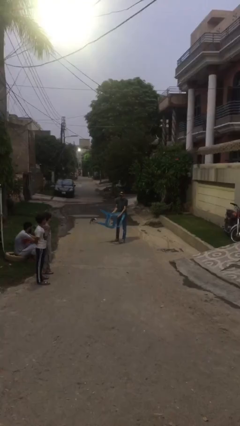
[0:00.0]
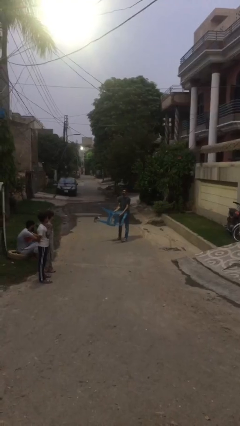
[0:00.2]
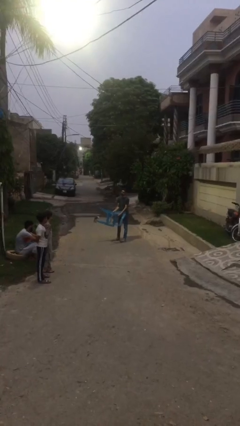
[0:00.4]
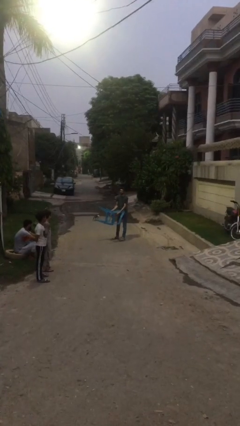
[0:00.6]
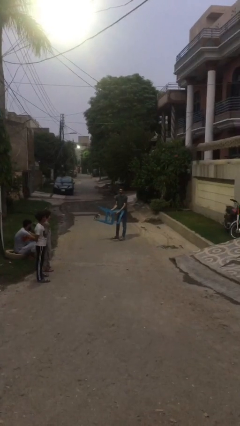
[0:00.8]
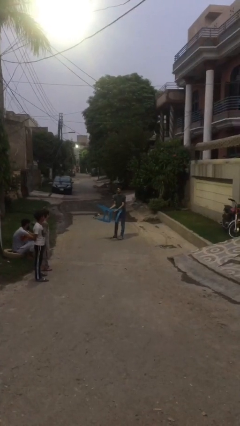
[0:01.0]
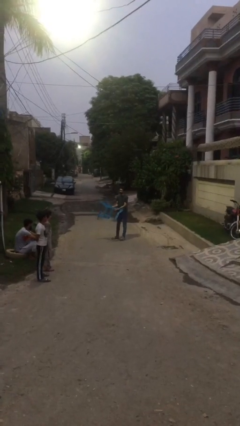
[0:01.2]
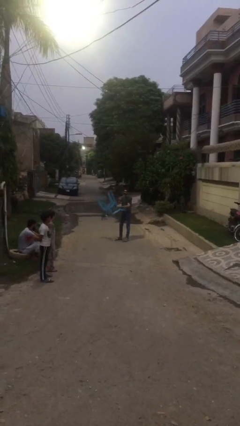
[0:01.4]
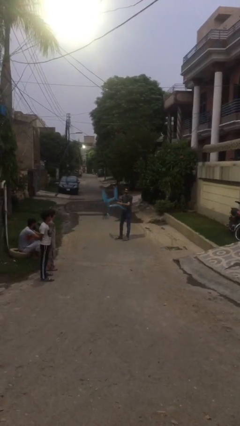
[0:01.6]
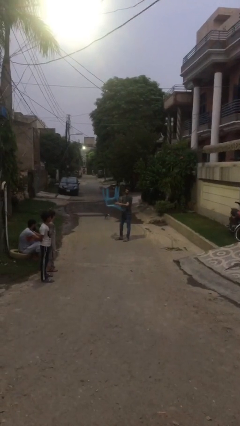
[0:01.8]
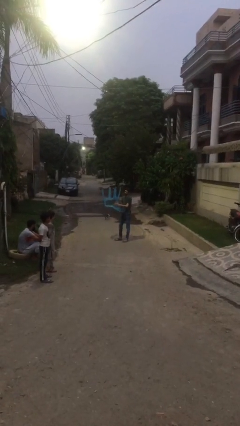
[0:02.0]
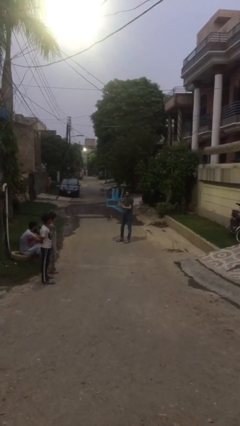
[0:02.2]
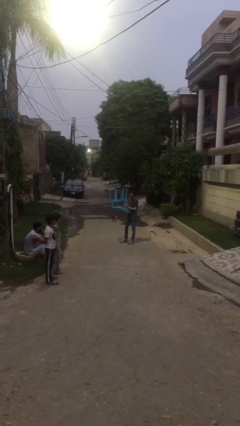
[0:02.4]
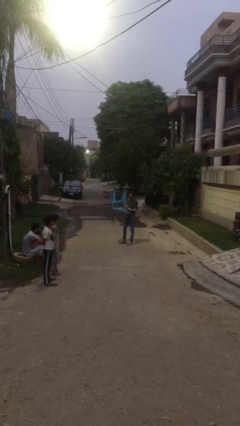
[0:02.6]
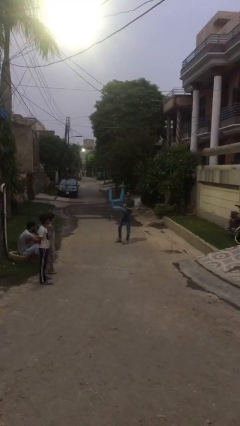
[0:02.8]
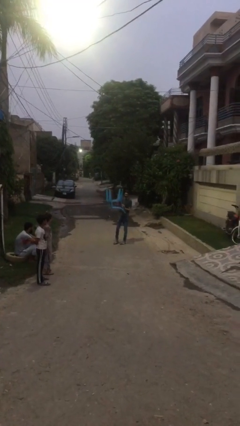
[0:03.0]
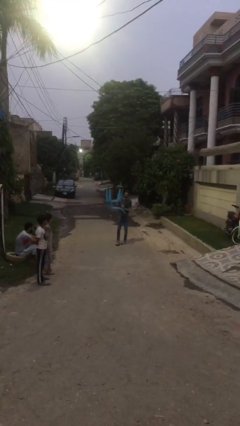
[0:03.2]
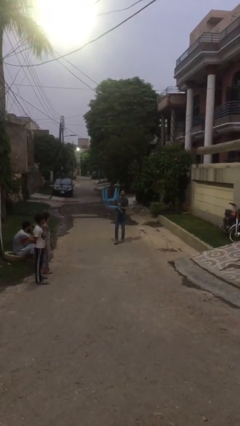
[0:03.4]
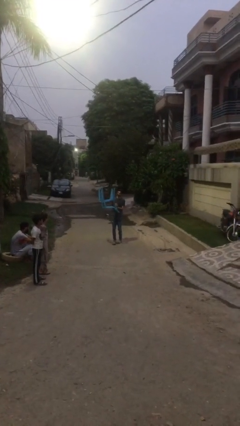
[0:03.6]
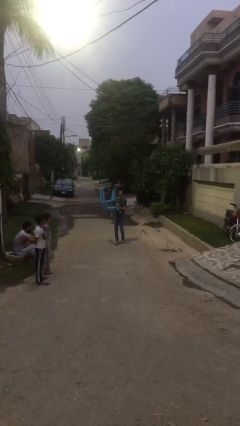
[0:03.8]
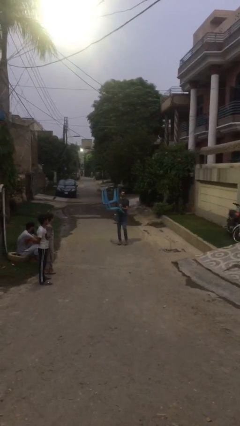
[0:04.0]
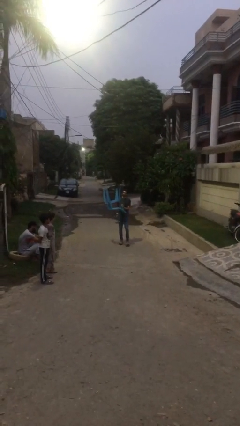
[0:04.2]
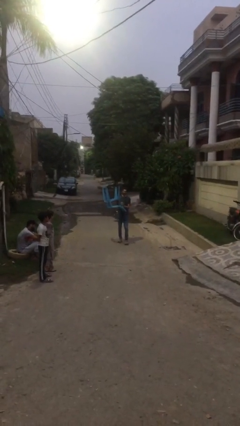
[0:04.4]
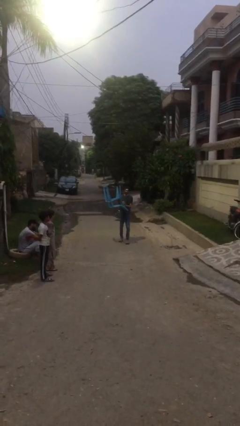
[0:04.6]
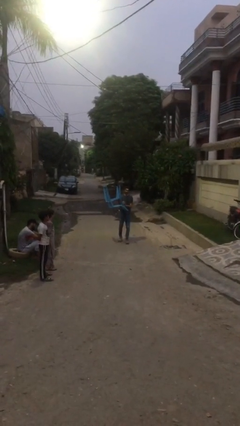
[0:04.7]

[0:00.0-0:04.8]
person carries heavy object

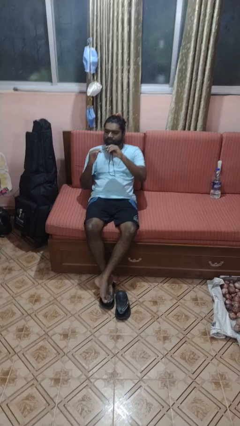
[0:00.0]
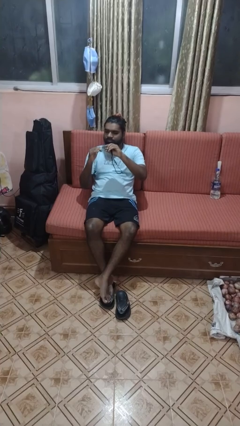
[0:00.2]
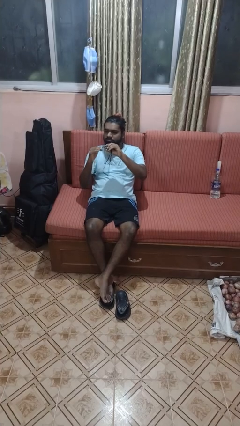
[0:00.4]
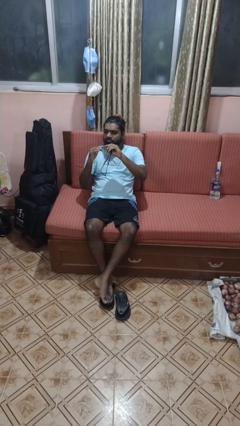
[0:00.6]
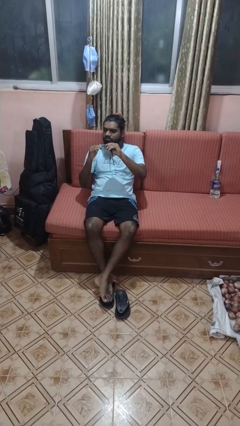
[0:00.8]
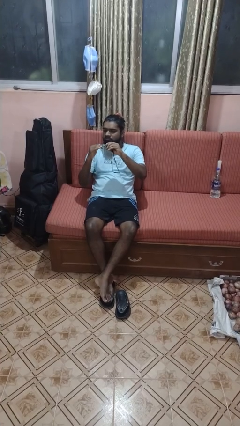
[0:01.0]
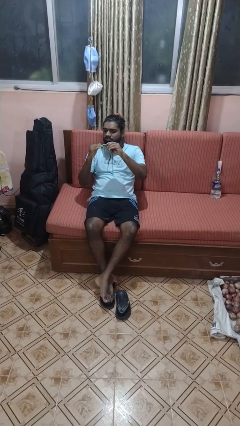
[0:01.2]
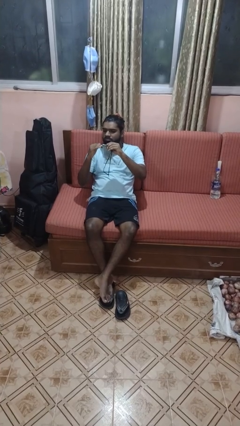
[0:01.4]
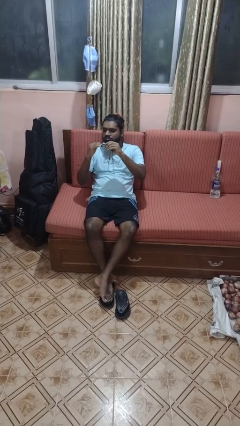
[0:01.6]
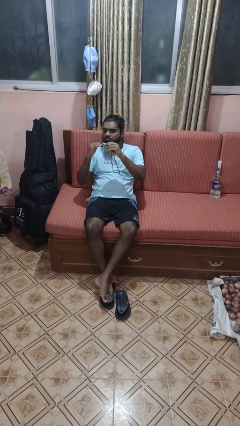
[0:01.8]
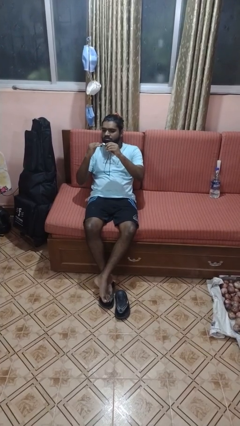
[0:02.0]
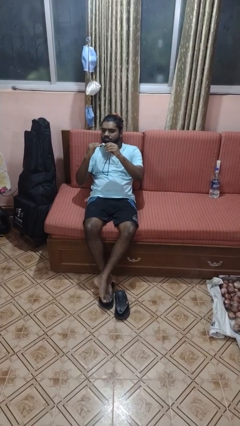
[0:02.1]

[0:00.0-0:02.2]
person clips fingernails

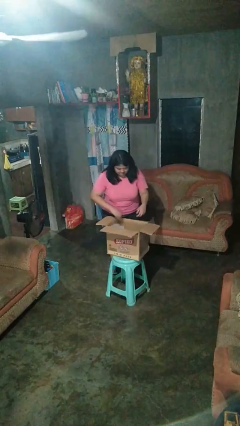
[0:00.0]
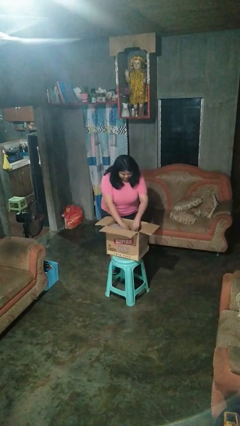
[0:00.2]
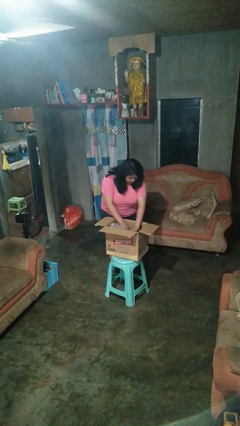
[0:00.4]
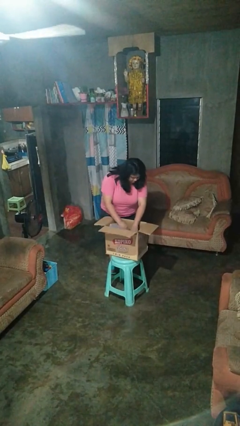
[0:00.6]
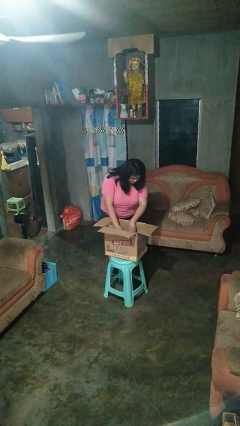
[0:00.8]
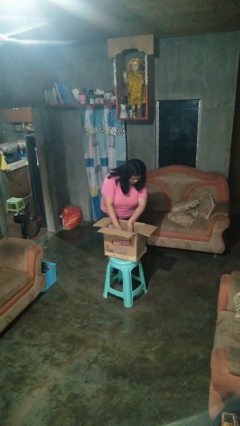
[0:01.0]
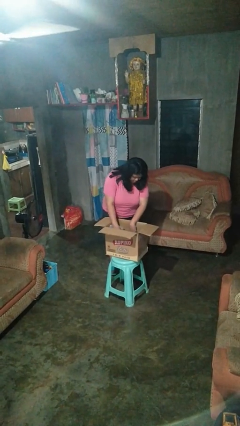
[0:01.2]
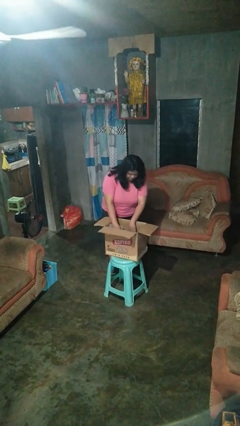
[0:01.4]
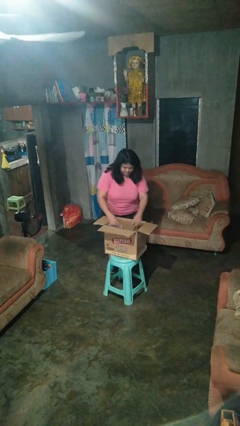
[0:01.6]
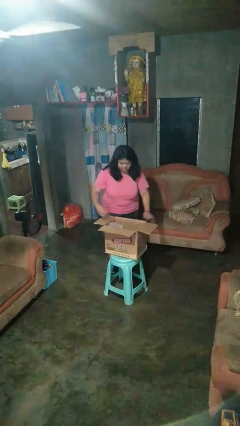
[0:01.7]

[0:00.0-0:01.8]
person searches in box

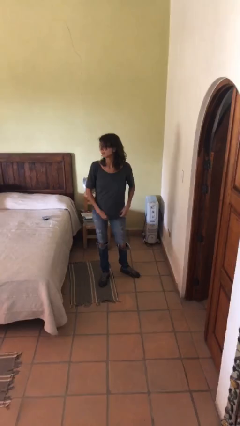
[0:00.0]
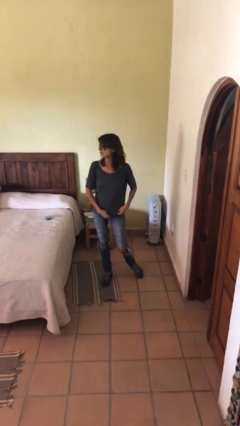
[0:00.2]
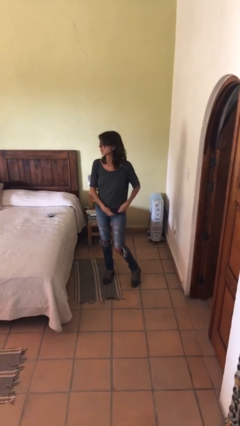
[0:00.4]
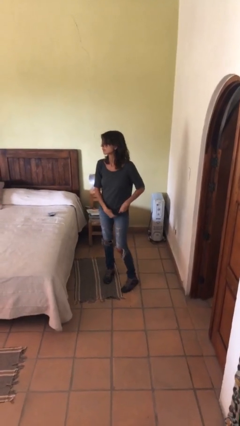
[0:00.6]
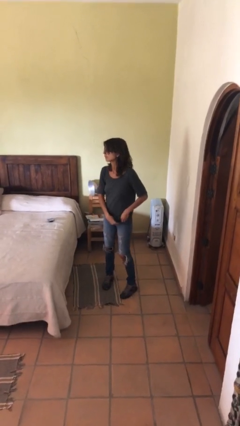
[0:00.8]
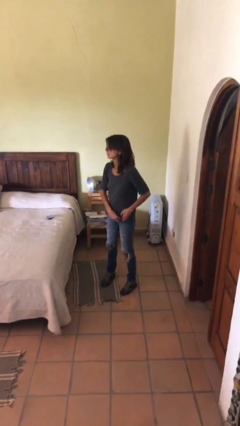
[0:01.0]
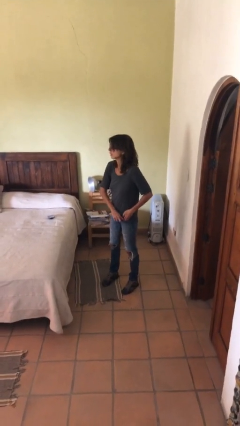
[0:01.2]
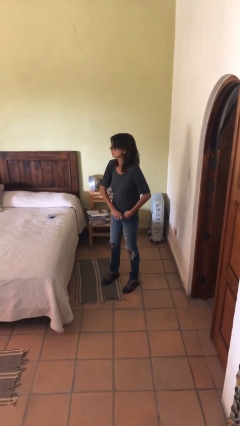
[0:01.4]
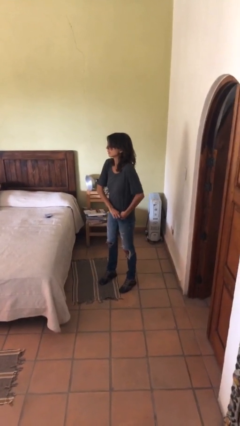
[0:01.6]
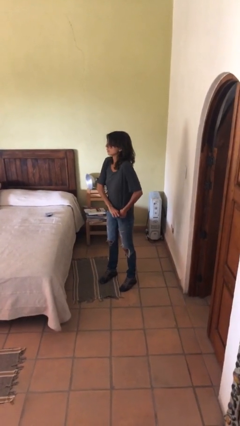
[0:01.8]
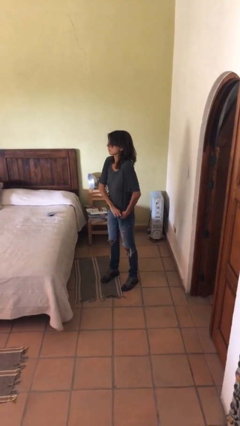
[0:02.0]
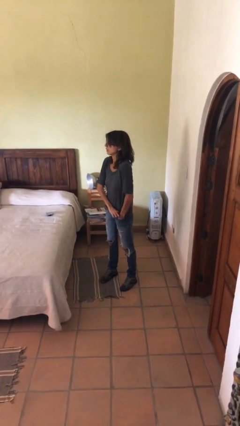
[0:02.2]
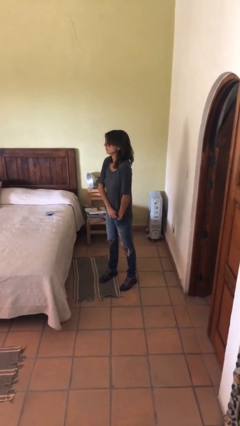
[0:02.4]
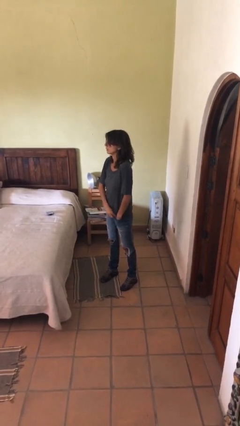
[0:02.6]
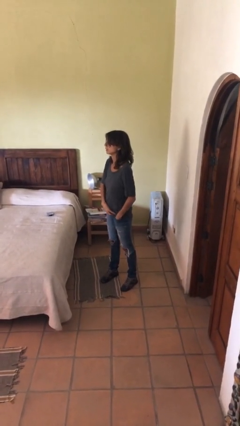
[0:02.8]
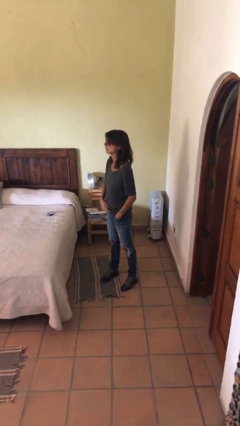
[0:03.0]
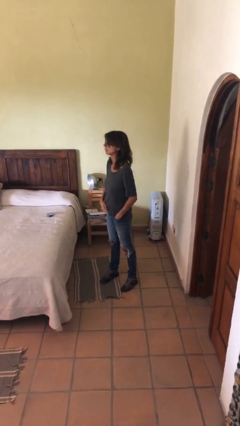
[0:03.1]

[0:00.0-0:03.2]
person puts hands in back pockets

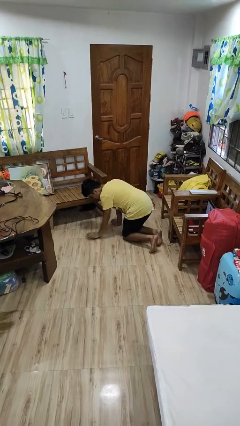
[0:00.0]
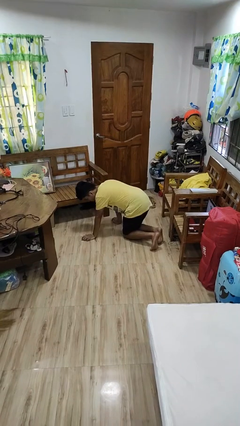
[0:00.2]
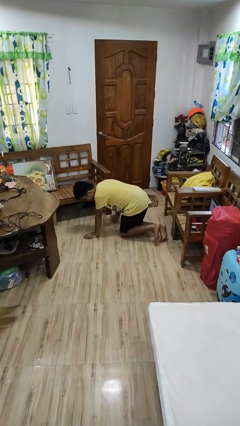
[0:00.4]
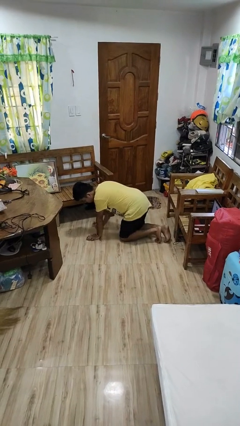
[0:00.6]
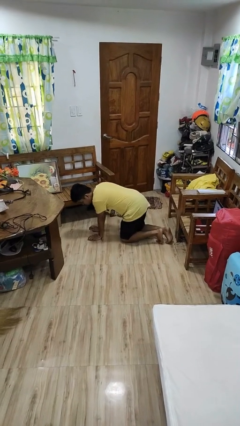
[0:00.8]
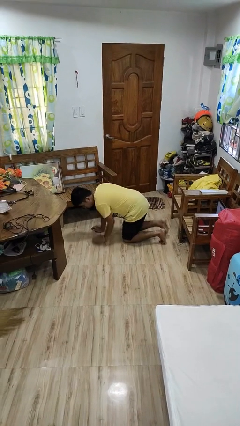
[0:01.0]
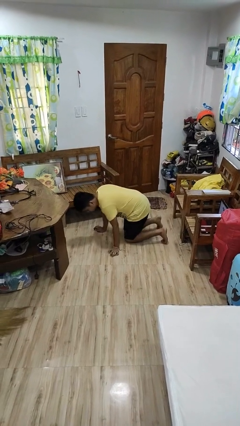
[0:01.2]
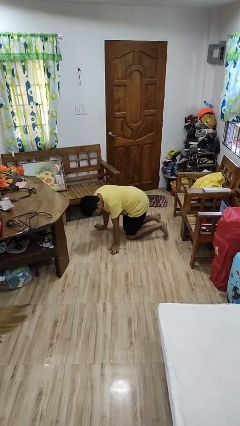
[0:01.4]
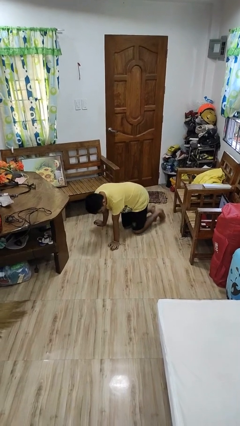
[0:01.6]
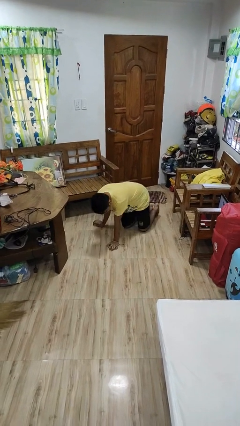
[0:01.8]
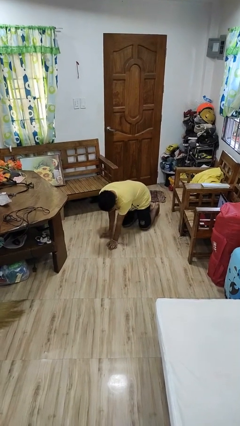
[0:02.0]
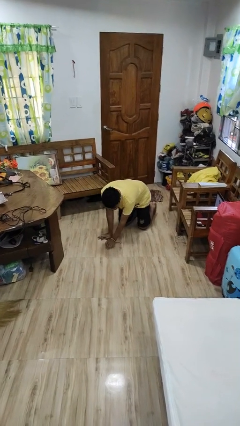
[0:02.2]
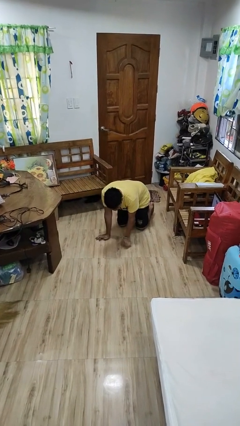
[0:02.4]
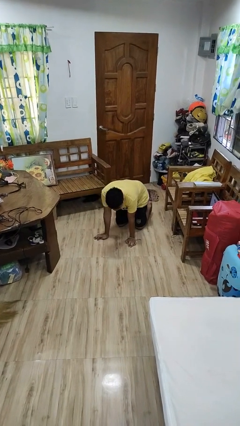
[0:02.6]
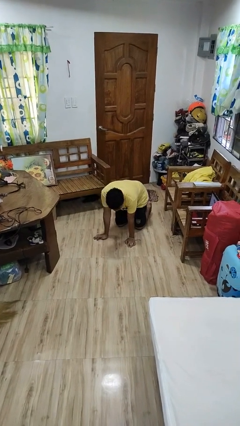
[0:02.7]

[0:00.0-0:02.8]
person crawls

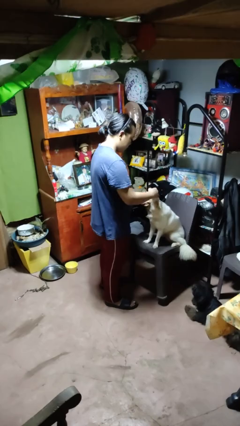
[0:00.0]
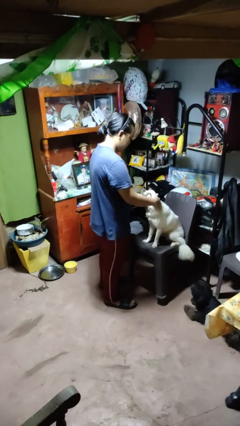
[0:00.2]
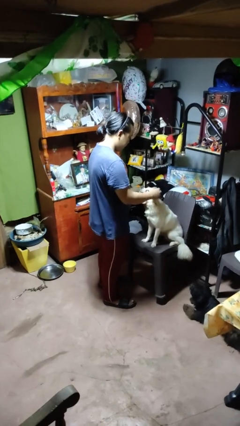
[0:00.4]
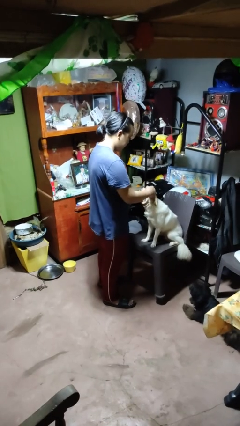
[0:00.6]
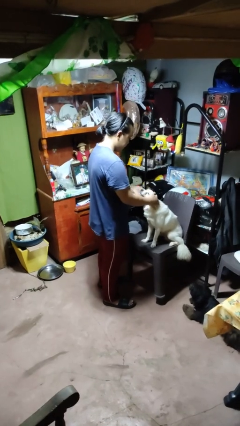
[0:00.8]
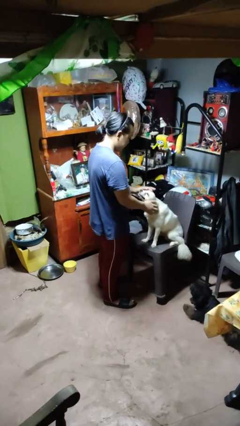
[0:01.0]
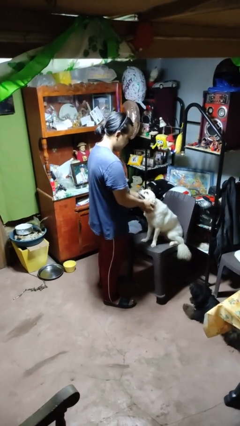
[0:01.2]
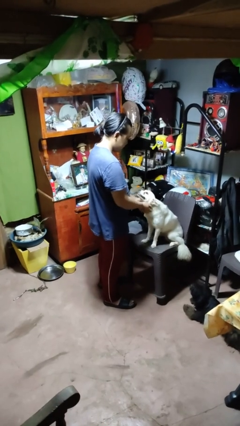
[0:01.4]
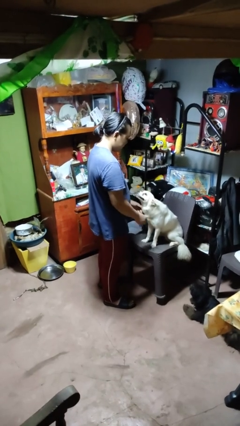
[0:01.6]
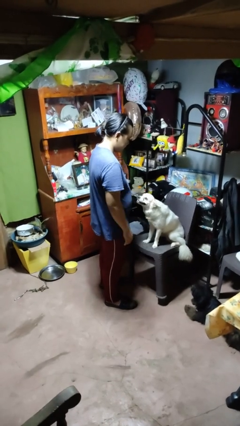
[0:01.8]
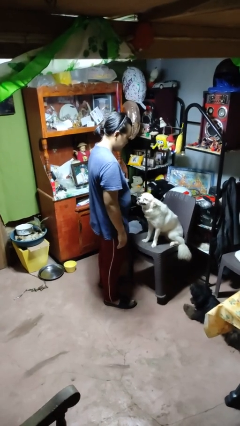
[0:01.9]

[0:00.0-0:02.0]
person pets dog

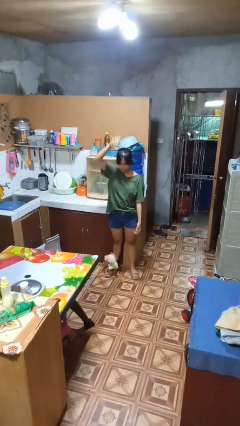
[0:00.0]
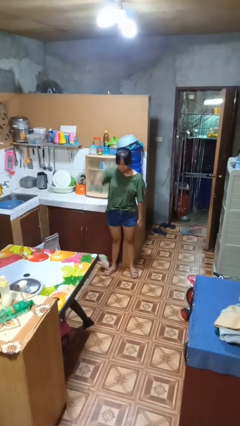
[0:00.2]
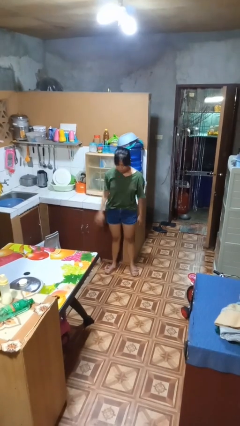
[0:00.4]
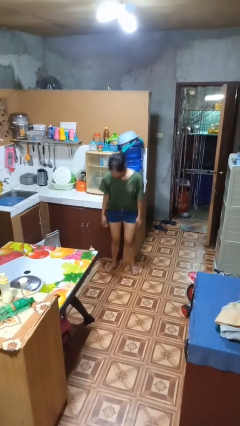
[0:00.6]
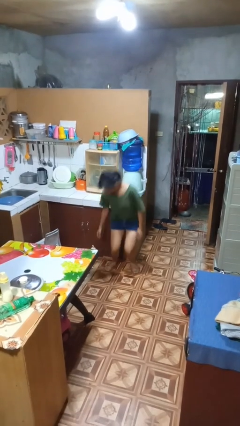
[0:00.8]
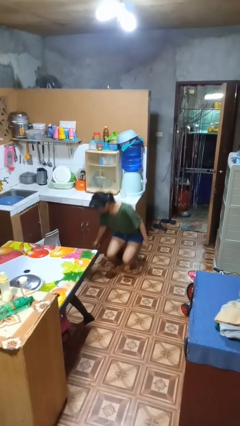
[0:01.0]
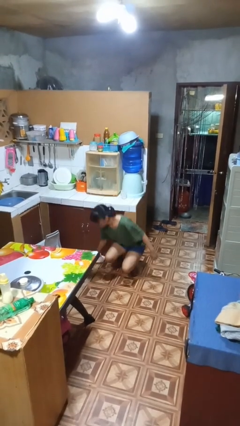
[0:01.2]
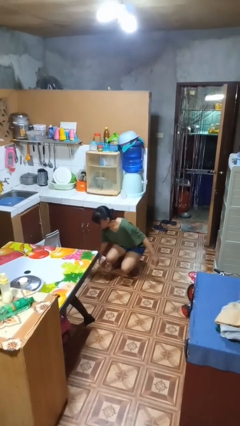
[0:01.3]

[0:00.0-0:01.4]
person picks up object from floor
